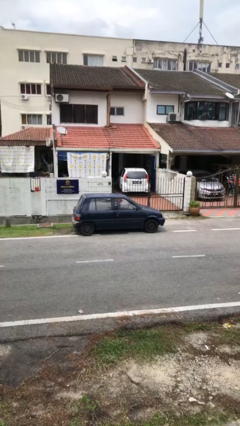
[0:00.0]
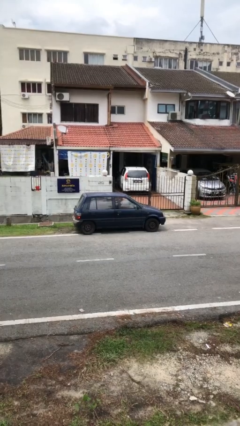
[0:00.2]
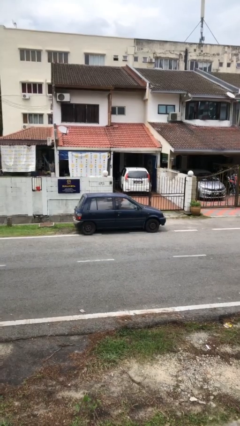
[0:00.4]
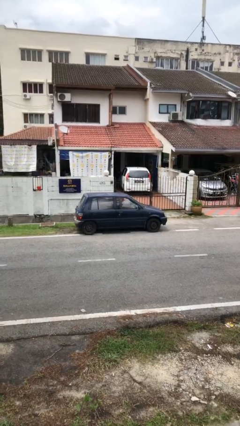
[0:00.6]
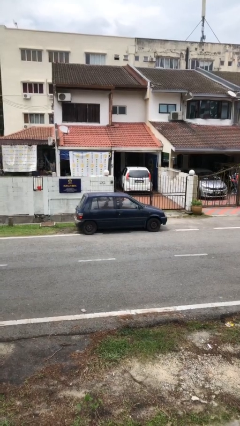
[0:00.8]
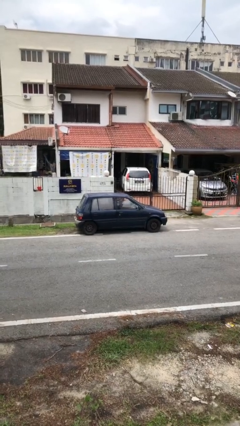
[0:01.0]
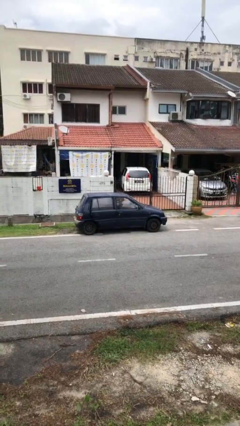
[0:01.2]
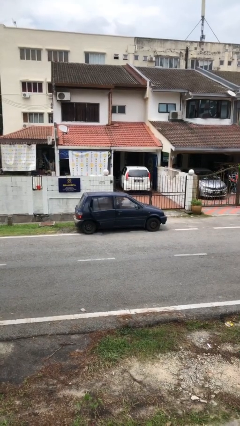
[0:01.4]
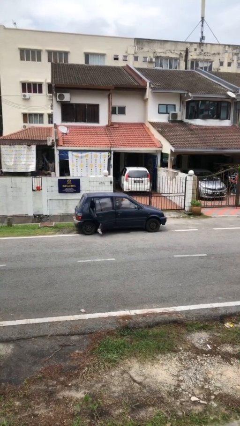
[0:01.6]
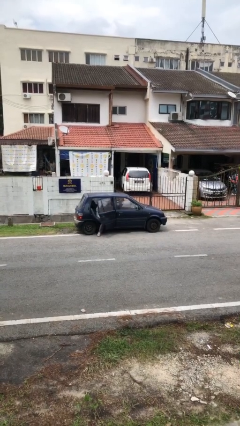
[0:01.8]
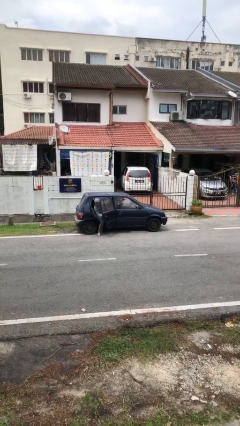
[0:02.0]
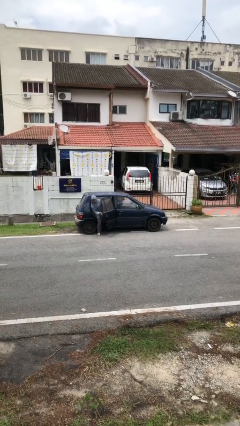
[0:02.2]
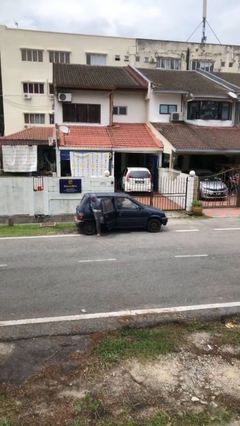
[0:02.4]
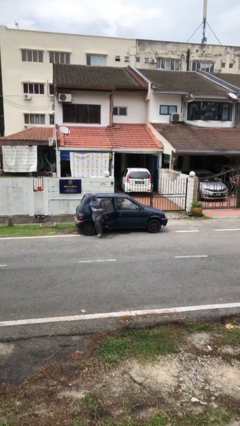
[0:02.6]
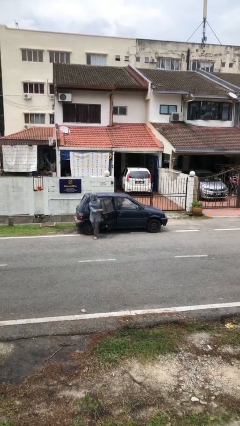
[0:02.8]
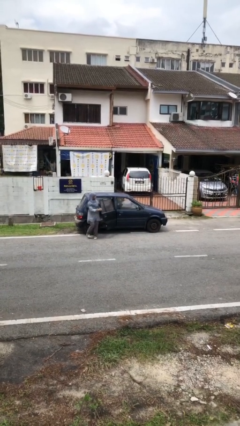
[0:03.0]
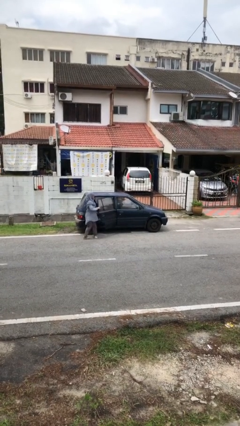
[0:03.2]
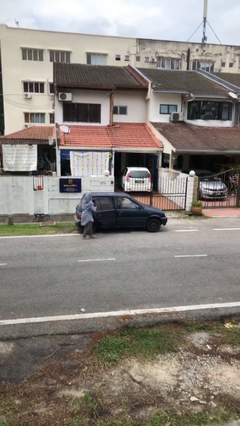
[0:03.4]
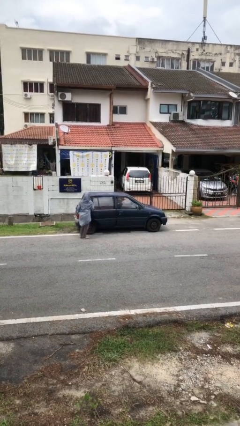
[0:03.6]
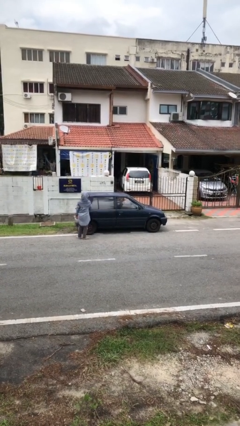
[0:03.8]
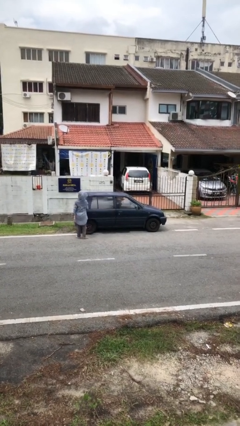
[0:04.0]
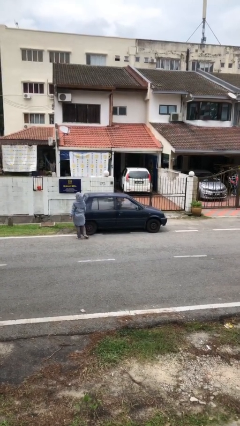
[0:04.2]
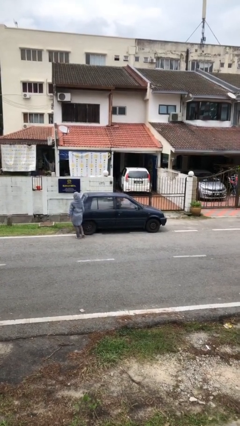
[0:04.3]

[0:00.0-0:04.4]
car drops off person

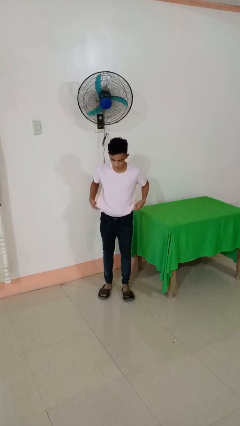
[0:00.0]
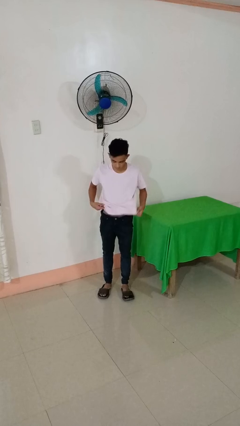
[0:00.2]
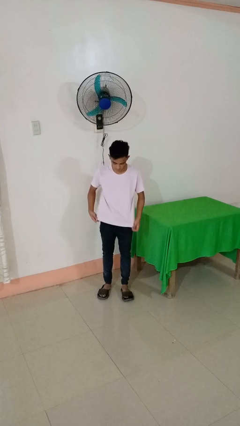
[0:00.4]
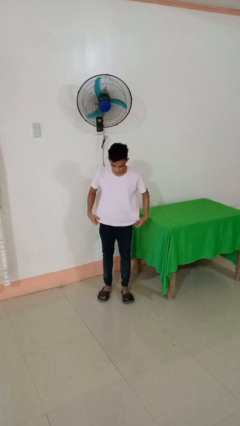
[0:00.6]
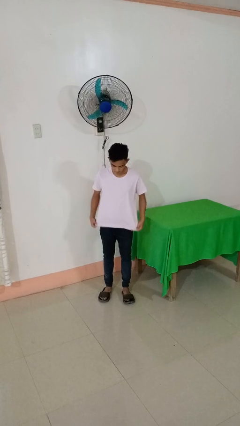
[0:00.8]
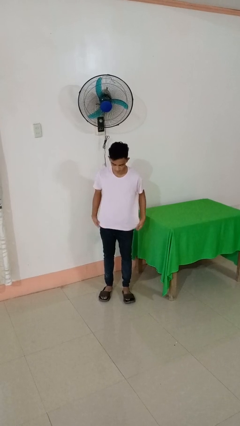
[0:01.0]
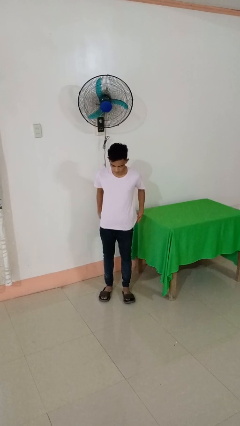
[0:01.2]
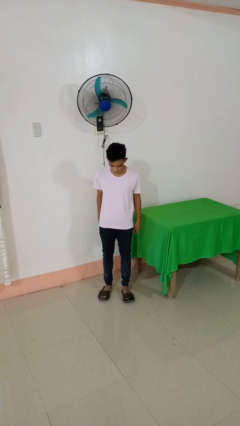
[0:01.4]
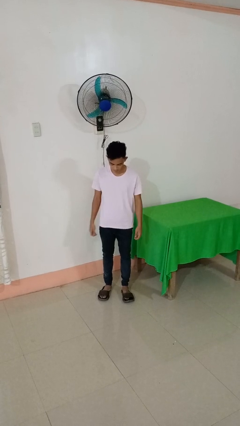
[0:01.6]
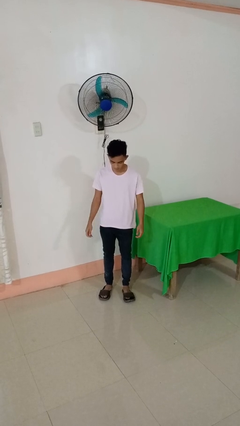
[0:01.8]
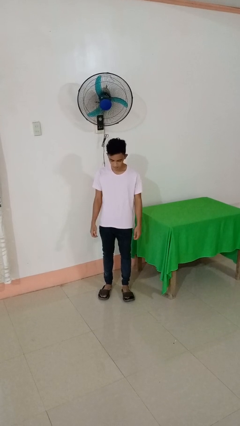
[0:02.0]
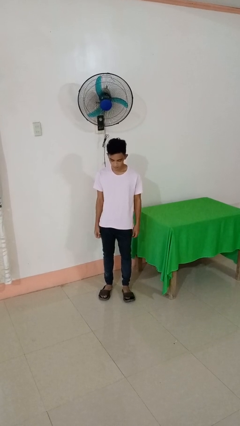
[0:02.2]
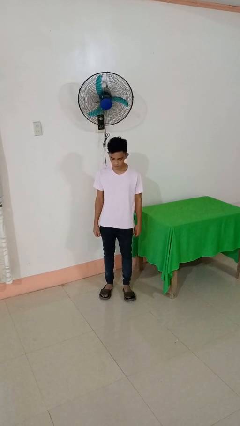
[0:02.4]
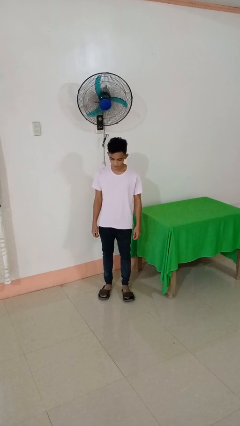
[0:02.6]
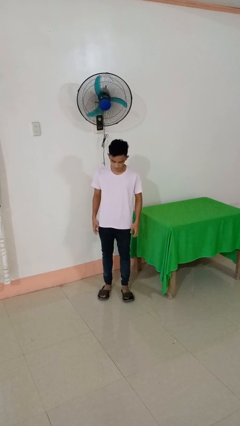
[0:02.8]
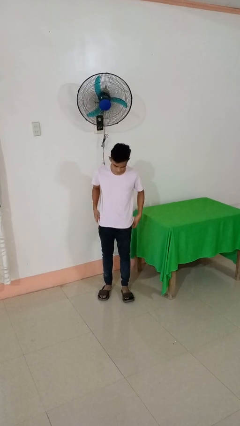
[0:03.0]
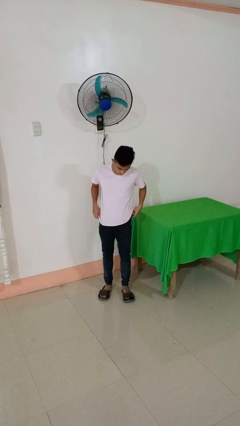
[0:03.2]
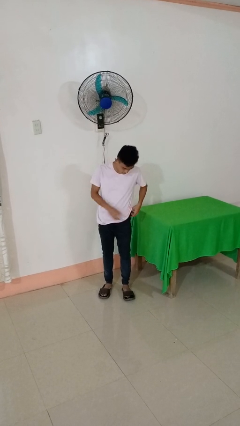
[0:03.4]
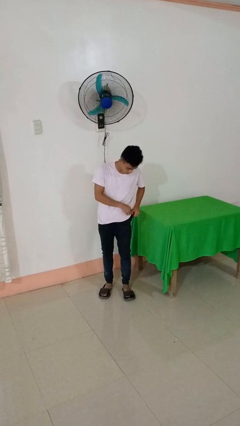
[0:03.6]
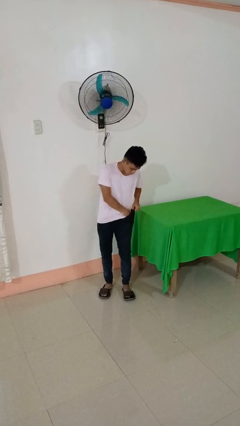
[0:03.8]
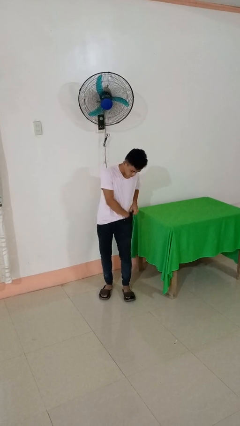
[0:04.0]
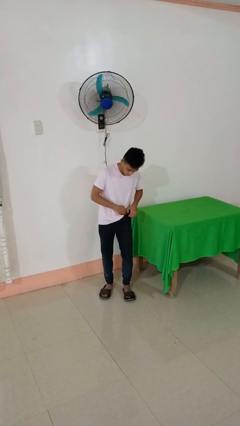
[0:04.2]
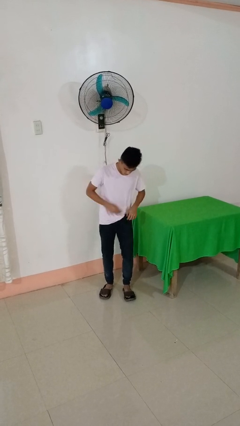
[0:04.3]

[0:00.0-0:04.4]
person untucks shirt

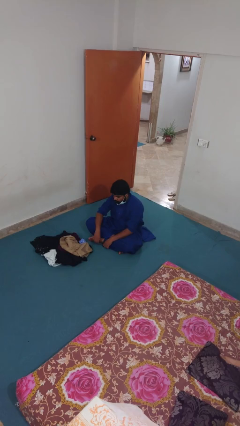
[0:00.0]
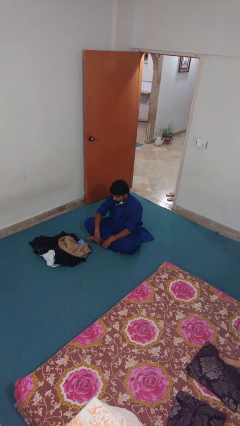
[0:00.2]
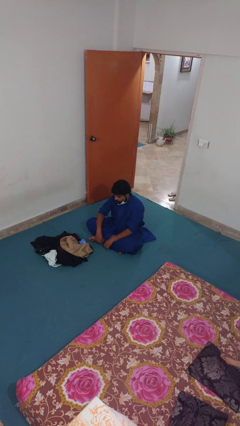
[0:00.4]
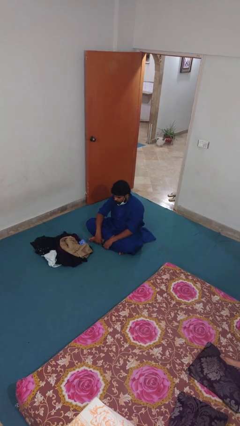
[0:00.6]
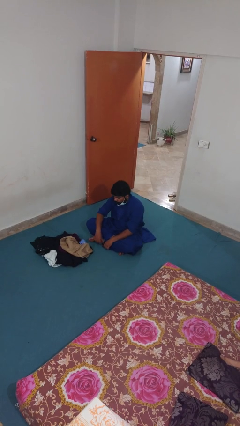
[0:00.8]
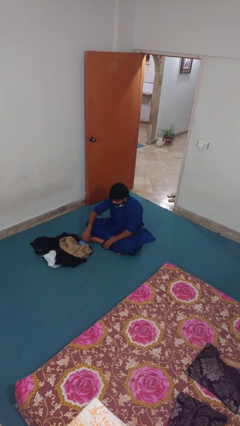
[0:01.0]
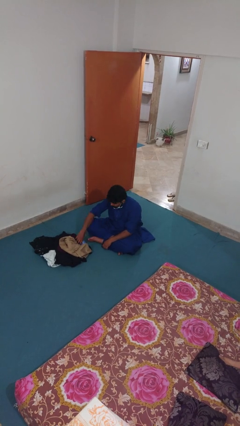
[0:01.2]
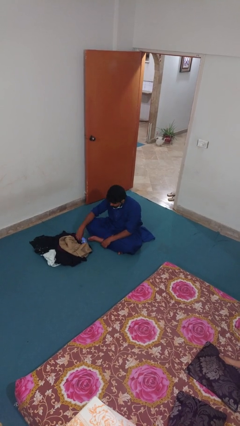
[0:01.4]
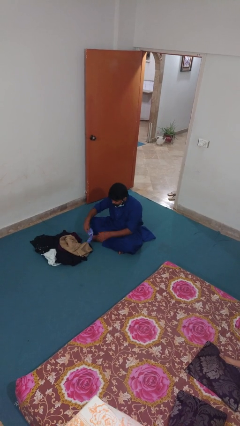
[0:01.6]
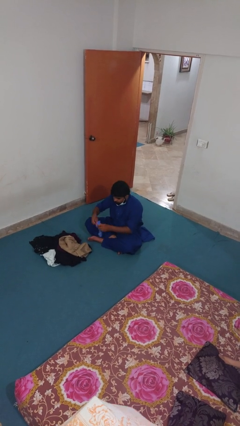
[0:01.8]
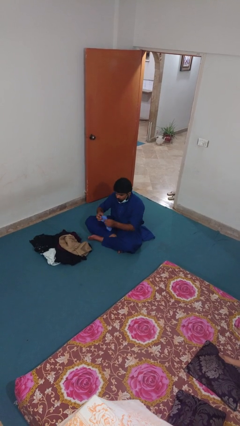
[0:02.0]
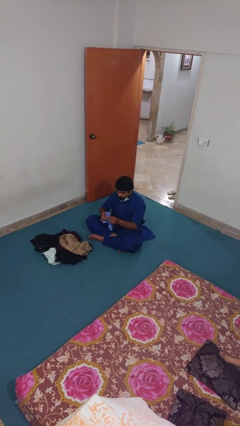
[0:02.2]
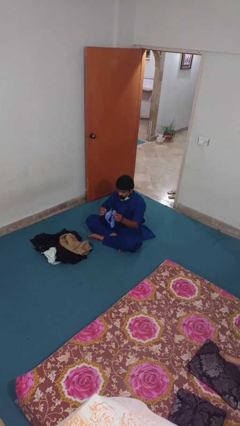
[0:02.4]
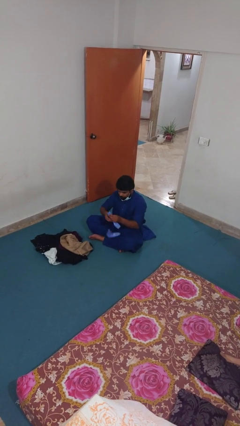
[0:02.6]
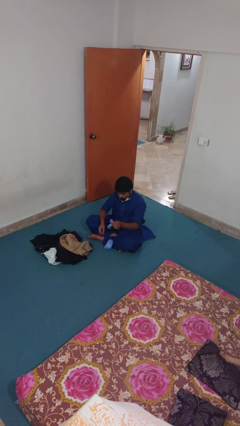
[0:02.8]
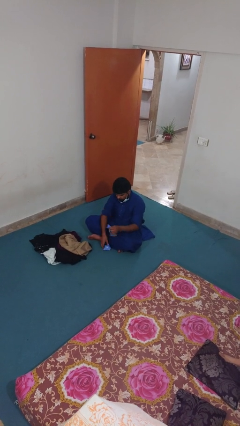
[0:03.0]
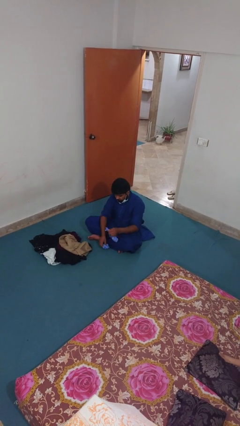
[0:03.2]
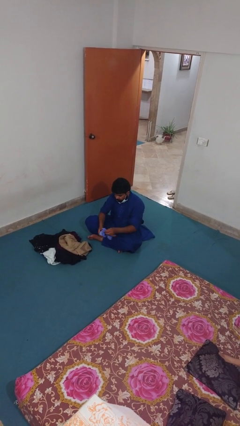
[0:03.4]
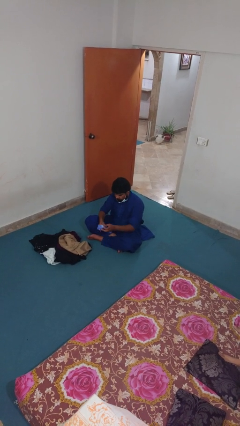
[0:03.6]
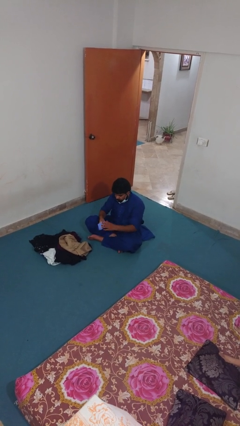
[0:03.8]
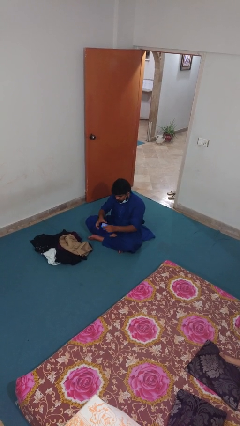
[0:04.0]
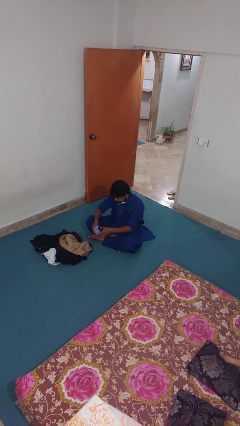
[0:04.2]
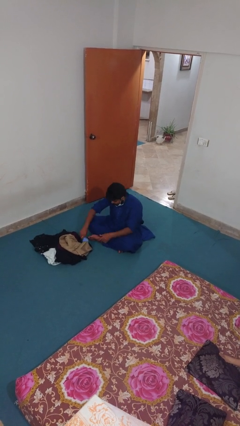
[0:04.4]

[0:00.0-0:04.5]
person folds socks

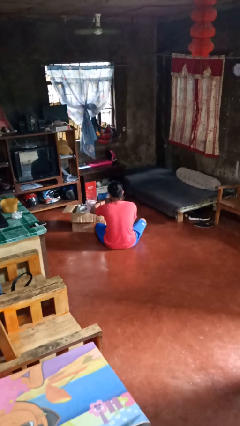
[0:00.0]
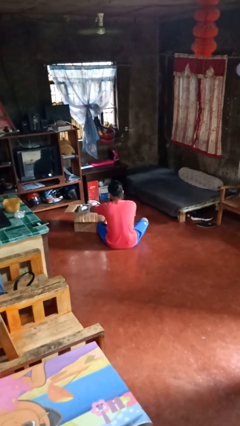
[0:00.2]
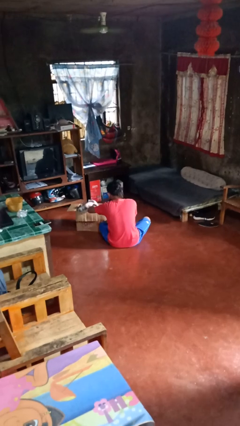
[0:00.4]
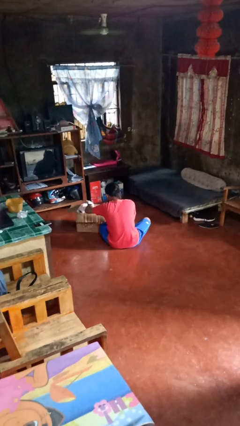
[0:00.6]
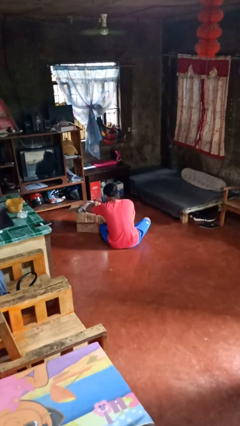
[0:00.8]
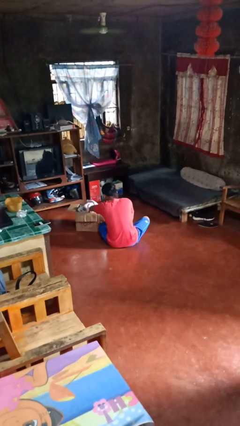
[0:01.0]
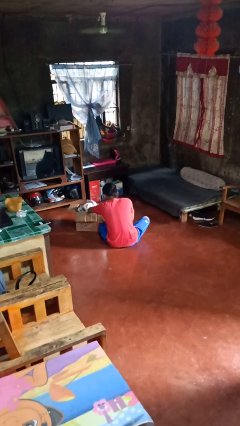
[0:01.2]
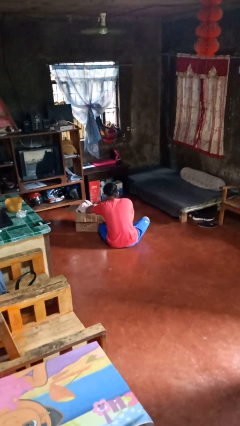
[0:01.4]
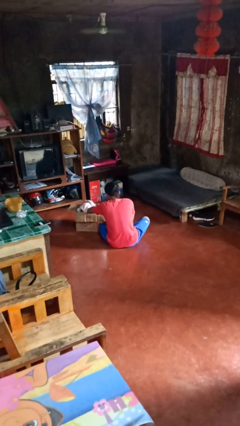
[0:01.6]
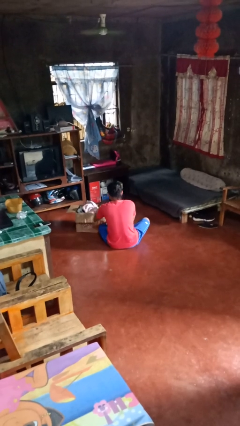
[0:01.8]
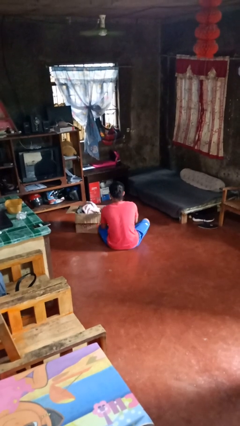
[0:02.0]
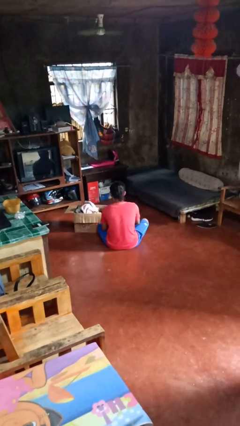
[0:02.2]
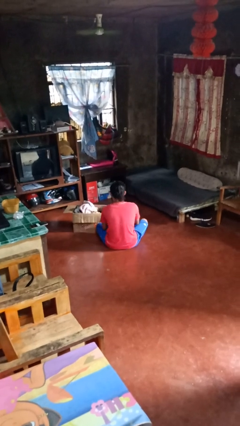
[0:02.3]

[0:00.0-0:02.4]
person searches in box

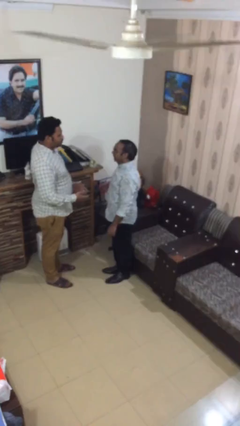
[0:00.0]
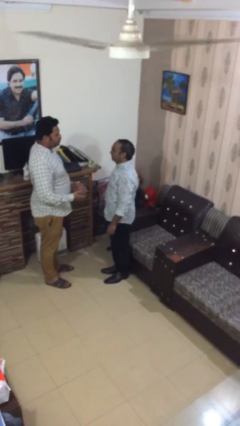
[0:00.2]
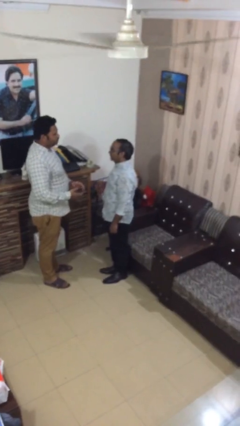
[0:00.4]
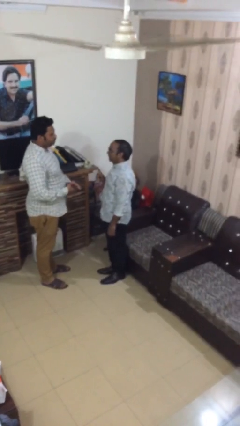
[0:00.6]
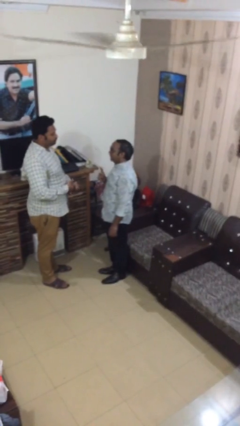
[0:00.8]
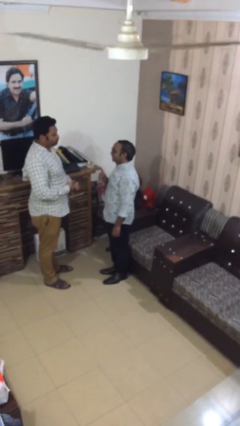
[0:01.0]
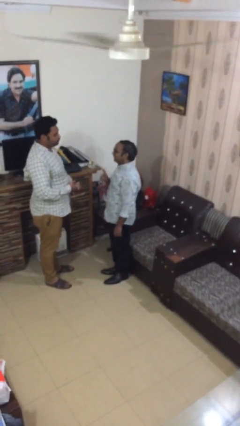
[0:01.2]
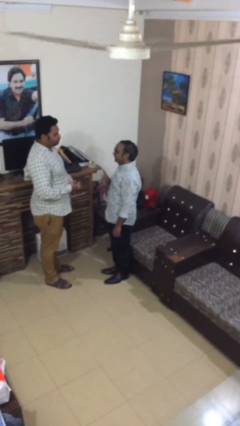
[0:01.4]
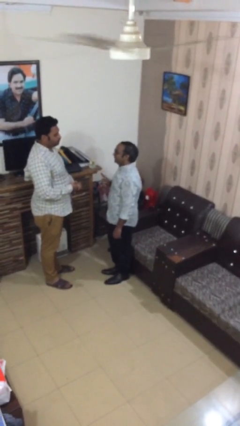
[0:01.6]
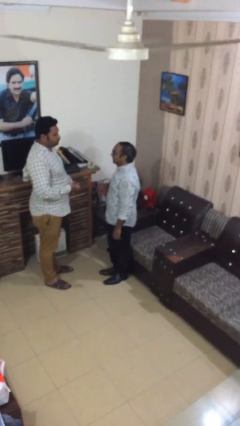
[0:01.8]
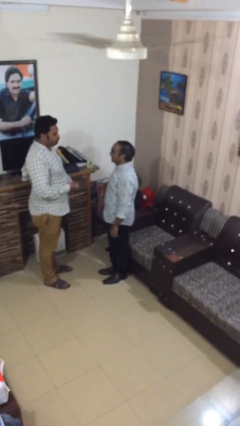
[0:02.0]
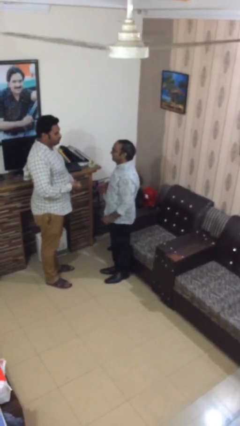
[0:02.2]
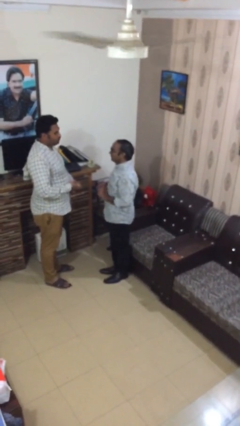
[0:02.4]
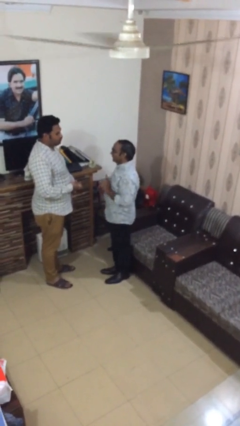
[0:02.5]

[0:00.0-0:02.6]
person talks to person
